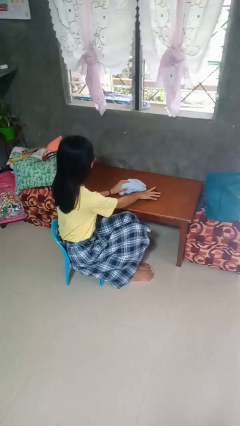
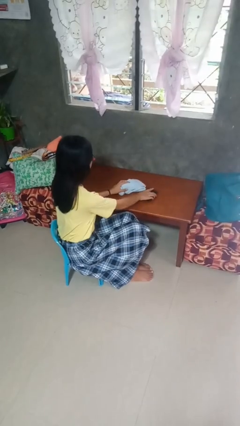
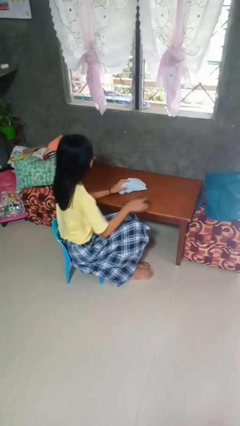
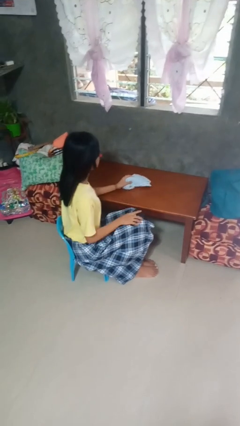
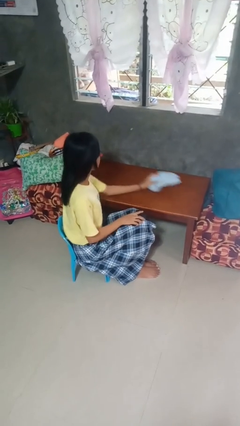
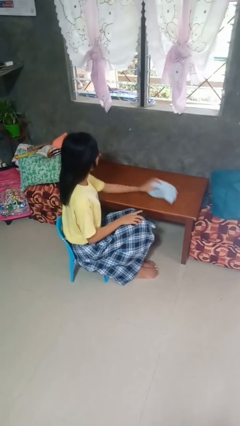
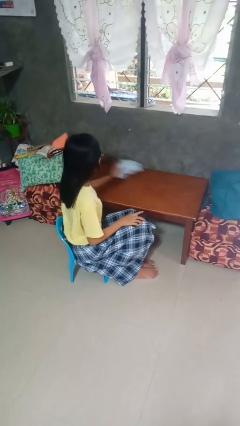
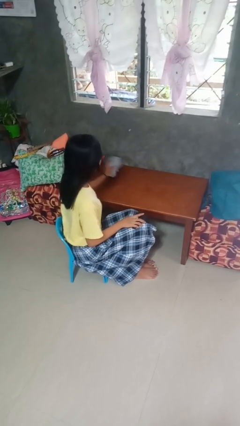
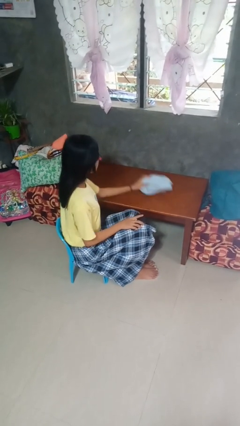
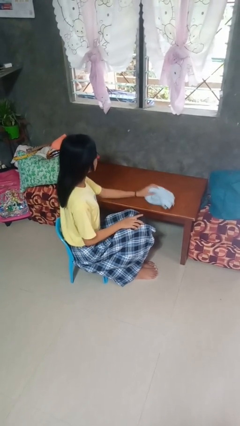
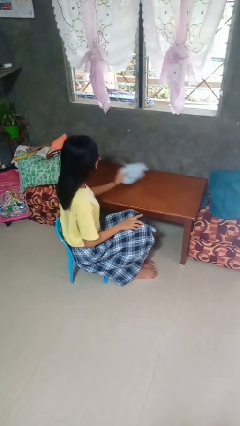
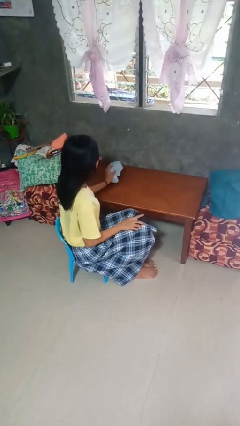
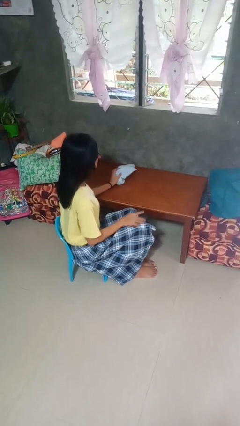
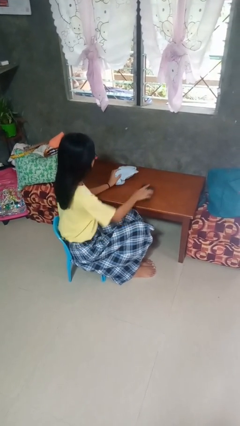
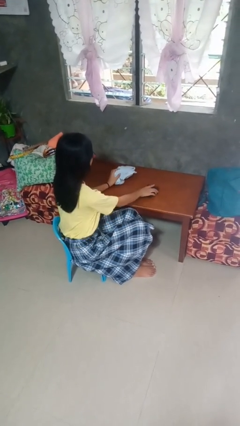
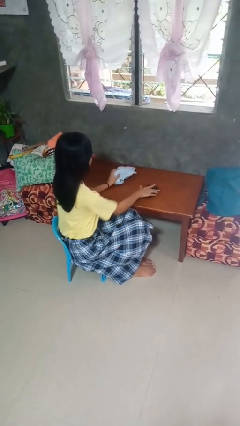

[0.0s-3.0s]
person cleans table with rag

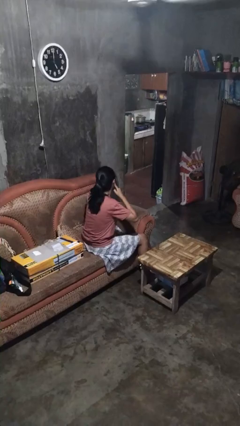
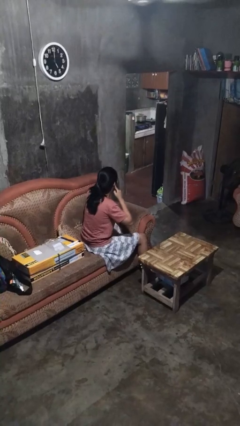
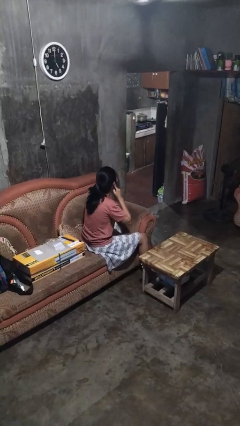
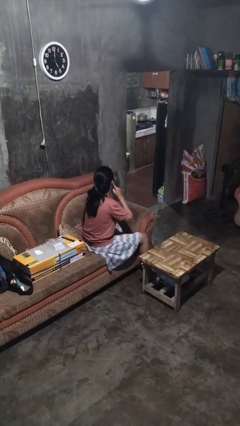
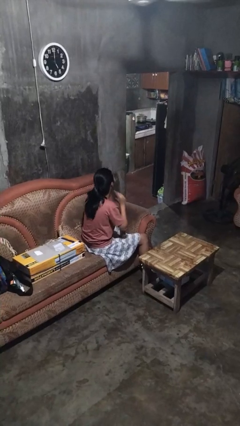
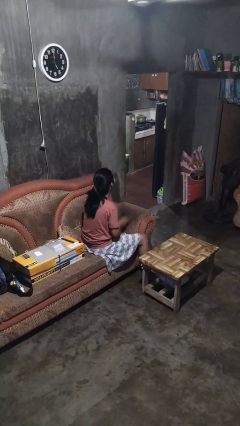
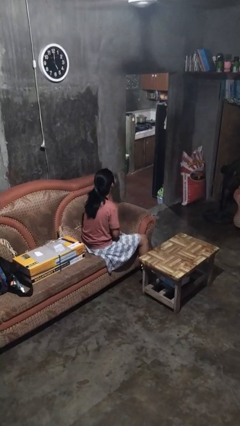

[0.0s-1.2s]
person puts fingers in ear

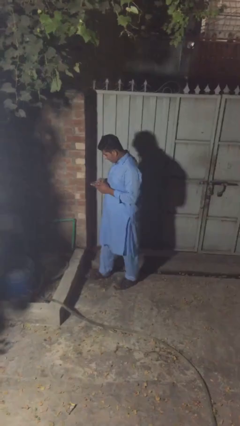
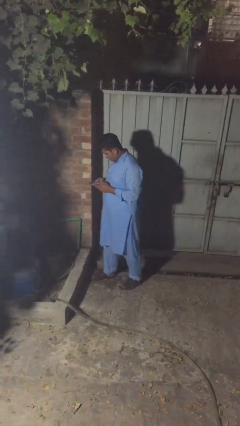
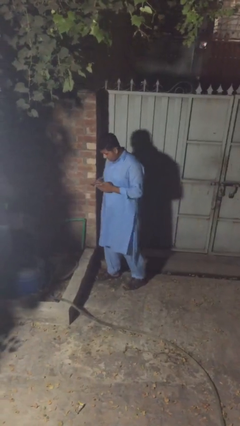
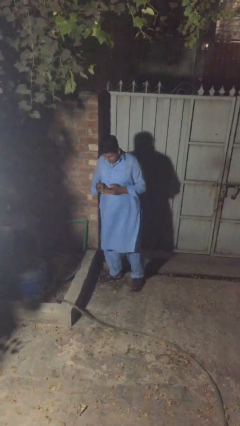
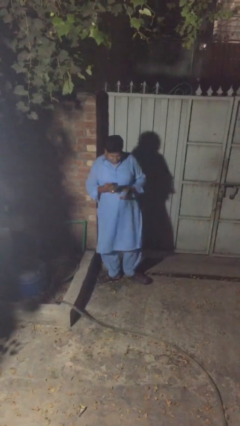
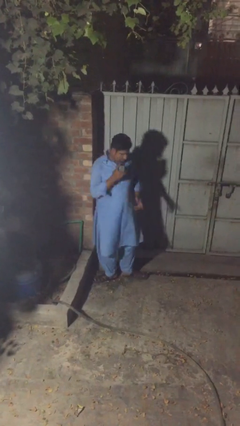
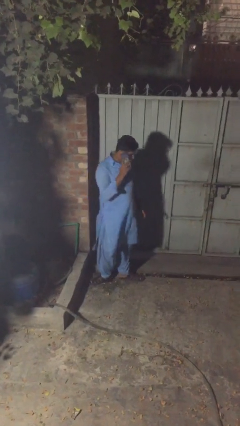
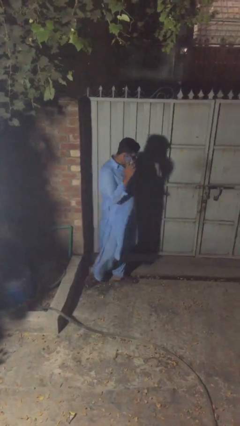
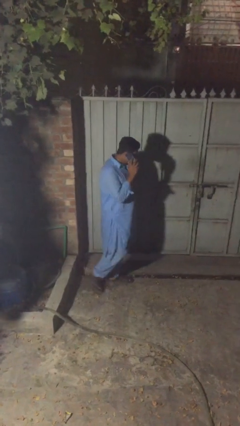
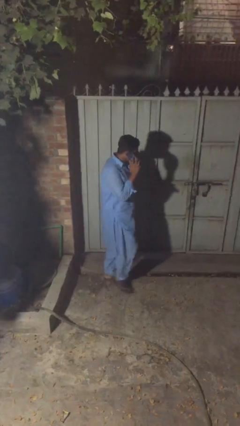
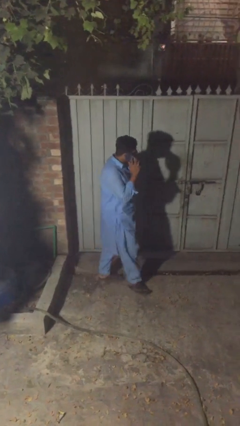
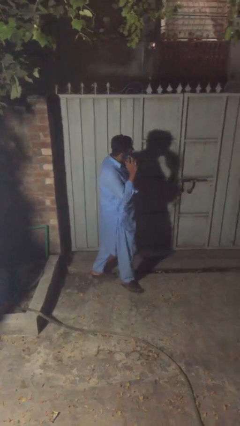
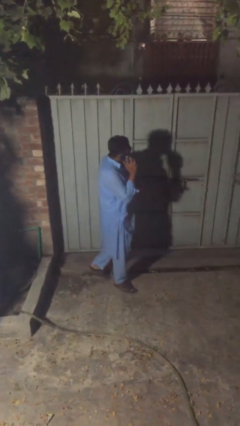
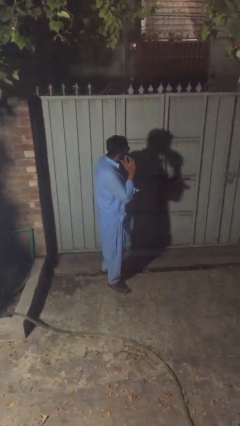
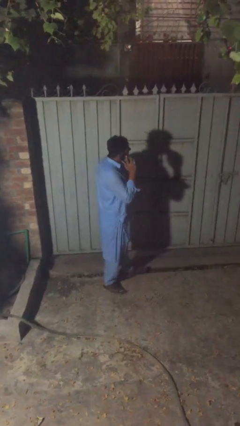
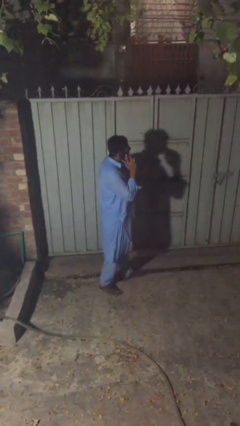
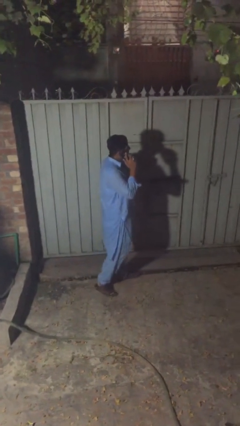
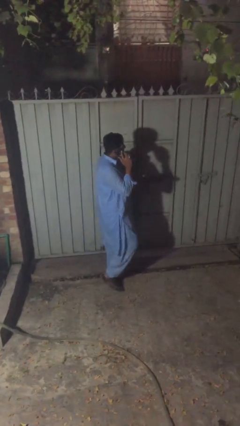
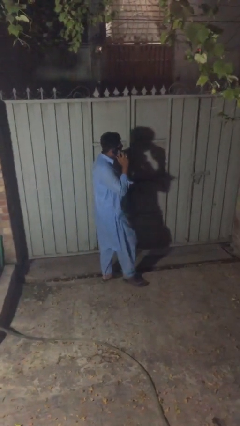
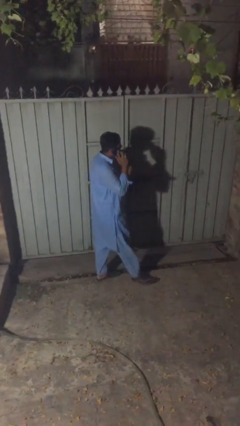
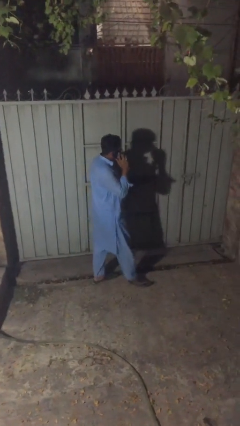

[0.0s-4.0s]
person talks on phone

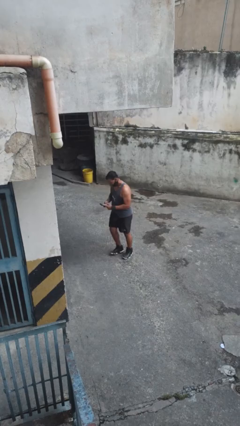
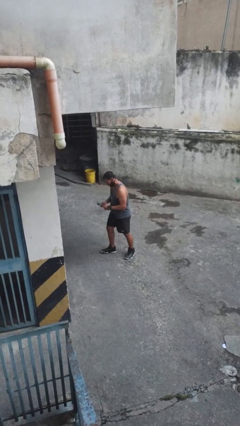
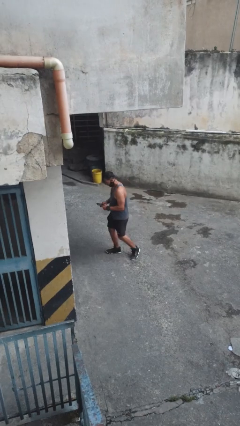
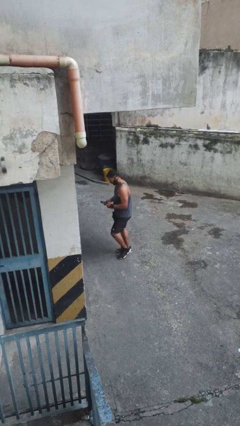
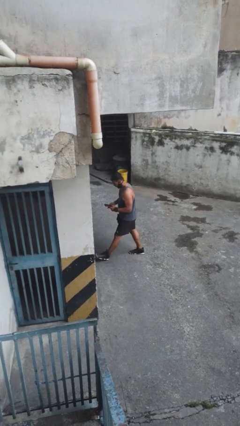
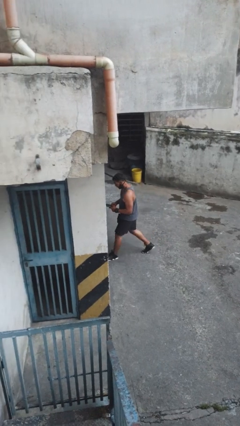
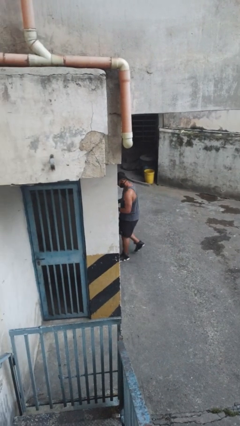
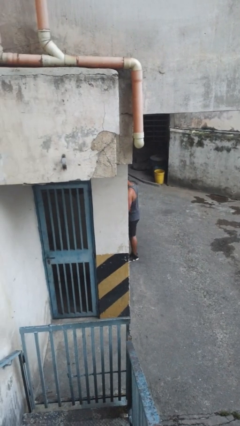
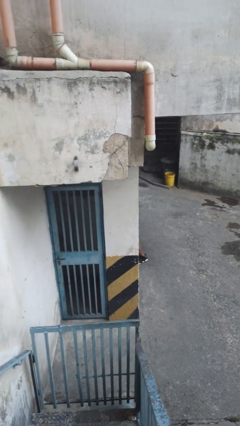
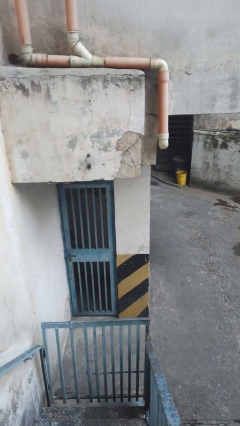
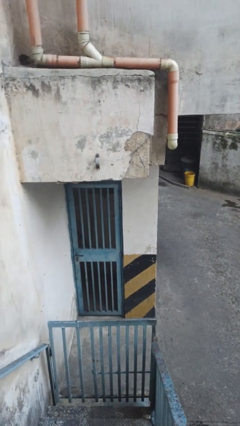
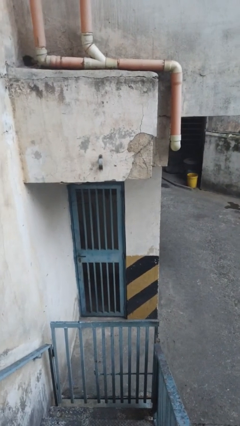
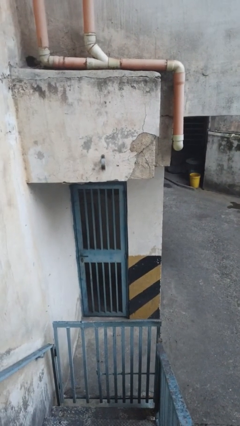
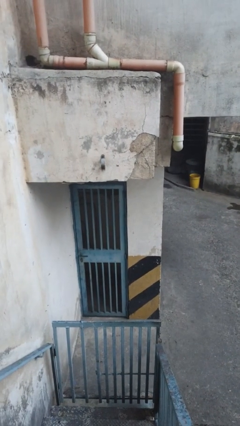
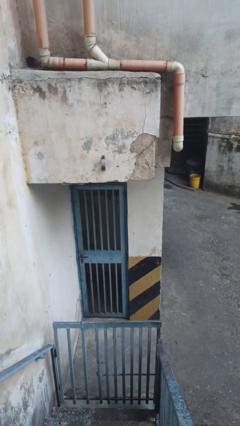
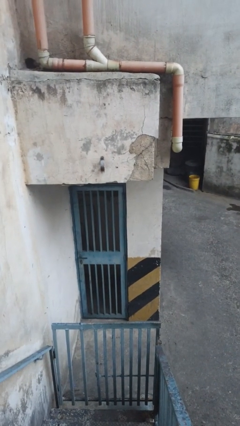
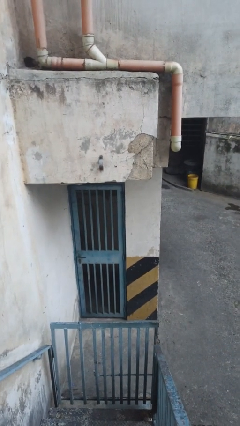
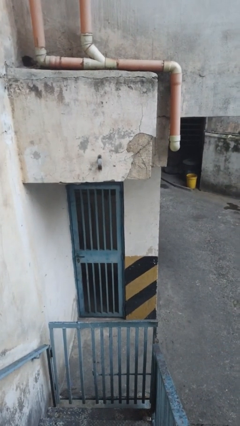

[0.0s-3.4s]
person exits scene through structure

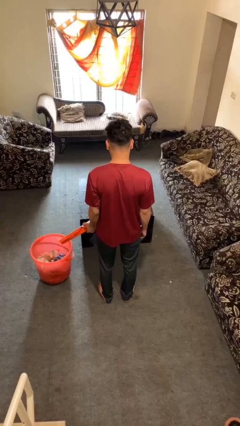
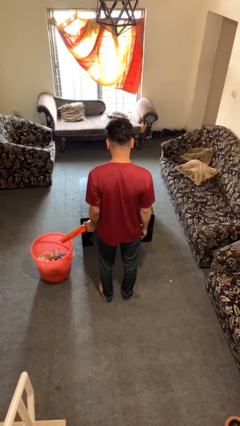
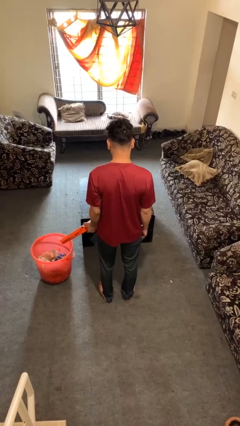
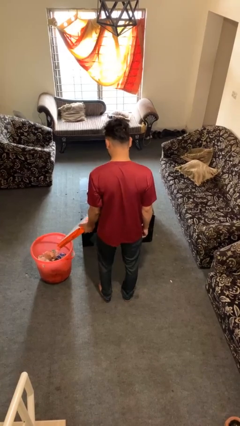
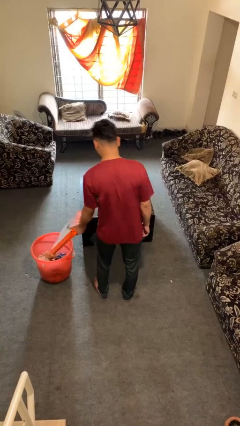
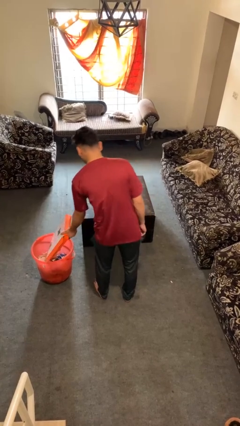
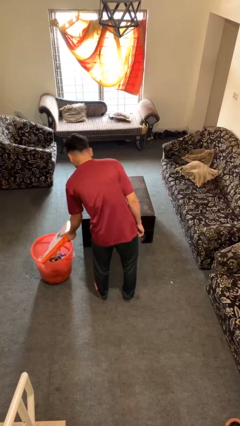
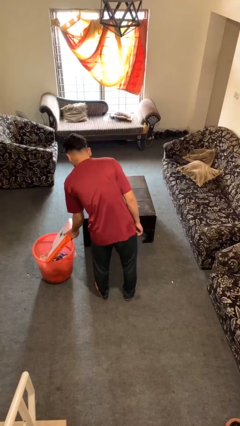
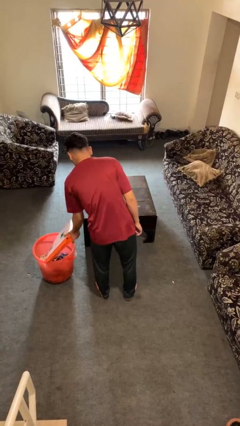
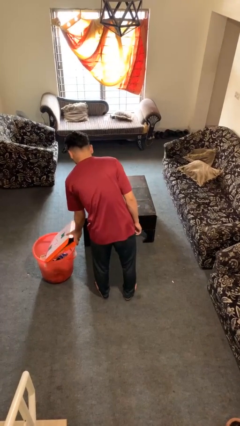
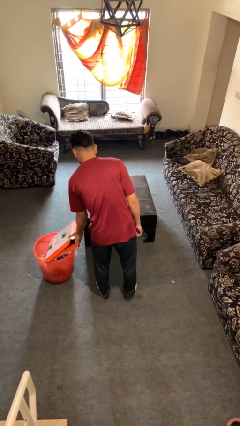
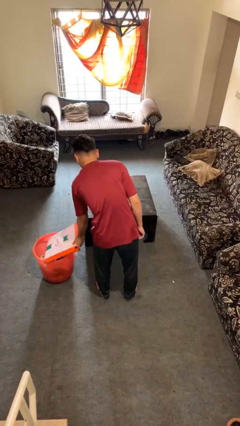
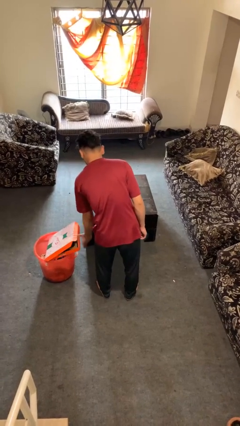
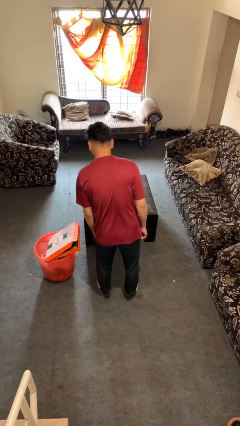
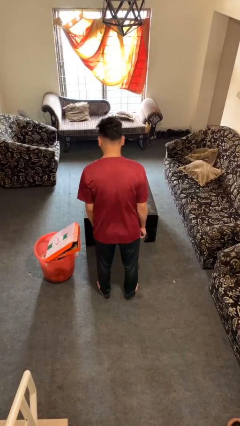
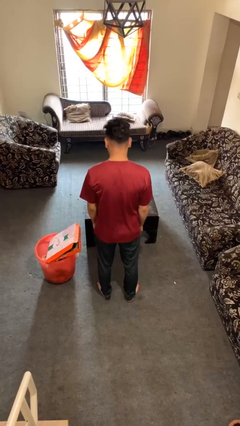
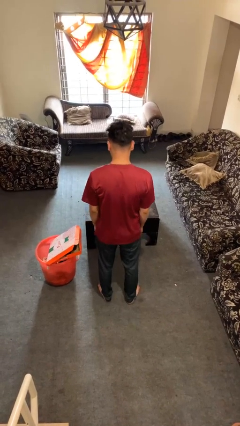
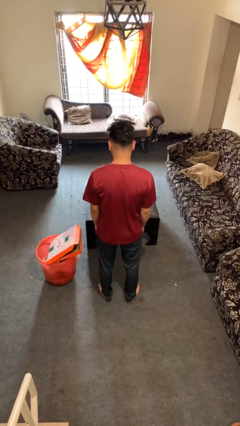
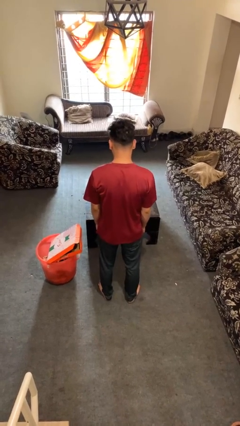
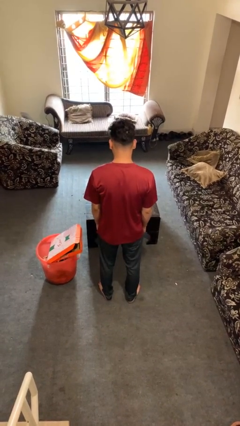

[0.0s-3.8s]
person puts object into basket

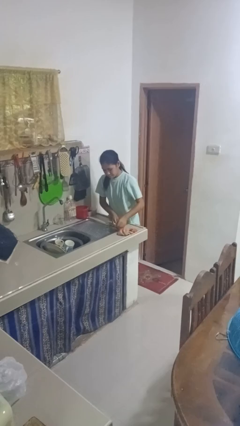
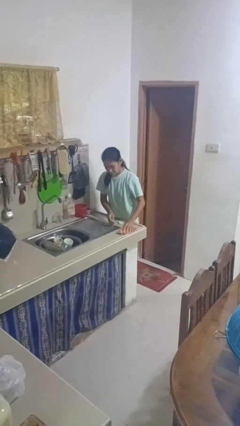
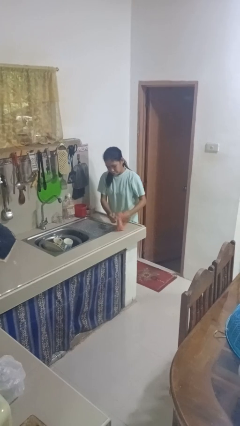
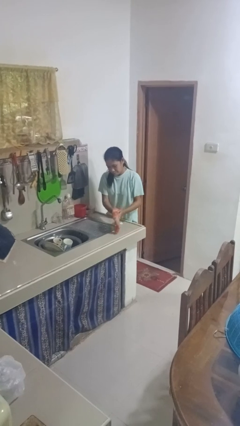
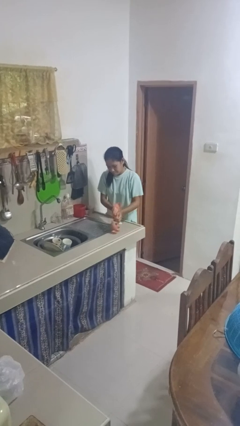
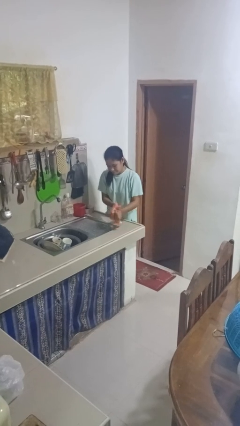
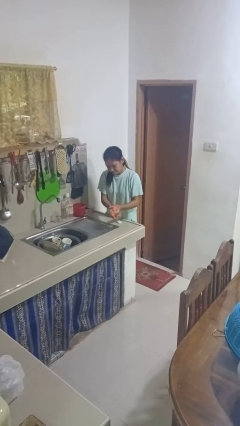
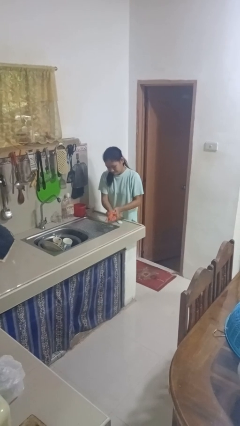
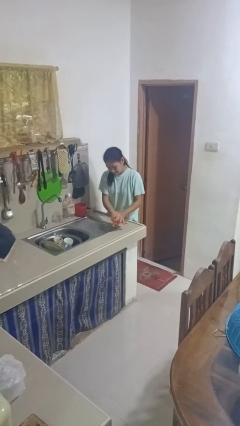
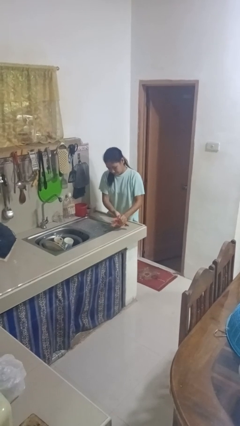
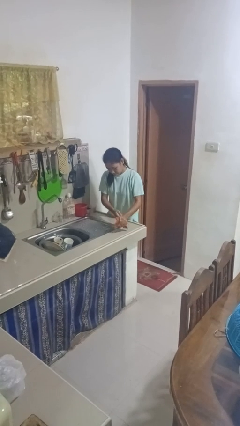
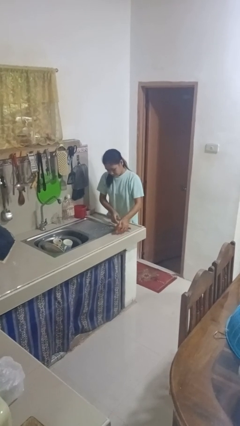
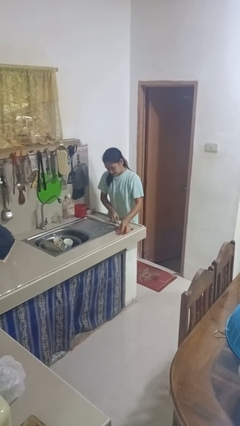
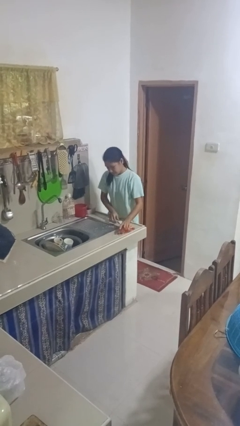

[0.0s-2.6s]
person dries hands with towel
